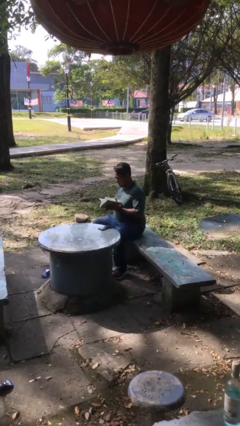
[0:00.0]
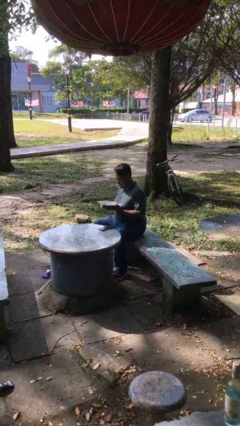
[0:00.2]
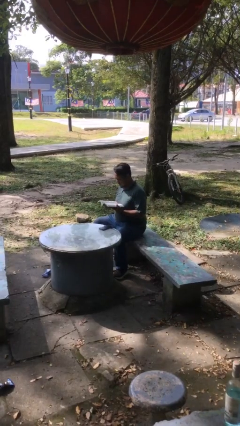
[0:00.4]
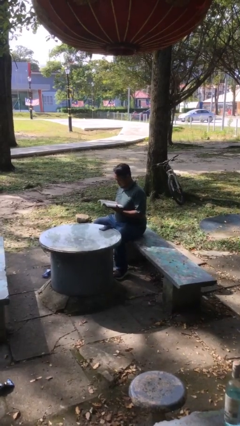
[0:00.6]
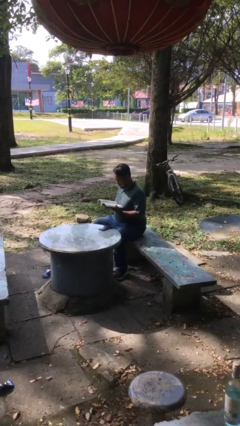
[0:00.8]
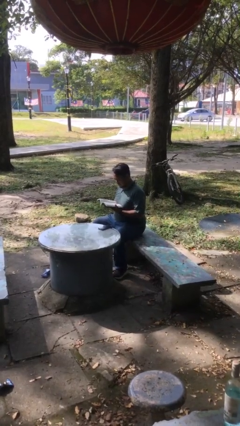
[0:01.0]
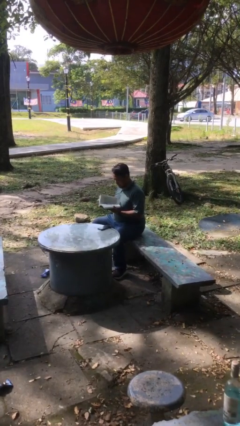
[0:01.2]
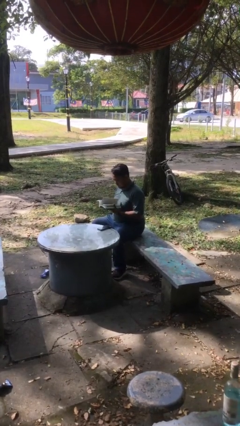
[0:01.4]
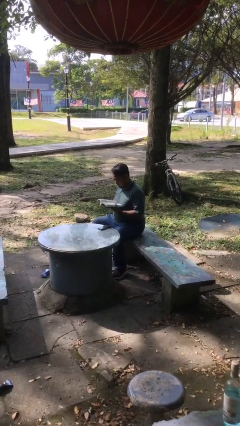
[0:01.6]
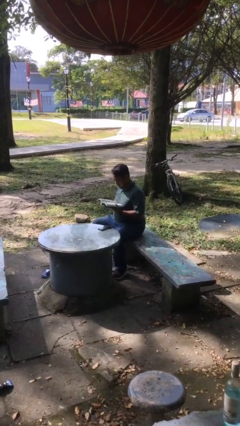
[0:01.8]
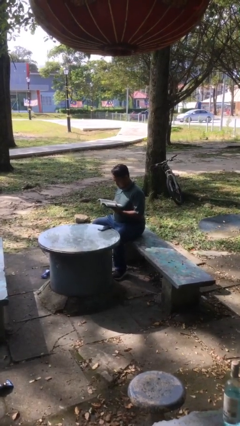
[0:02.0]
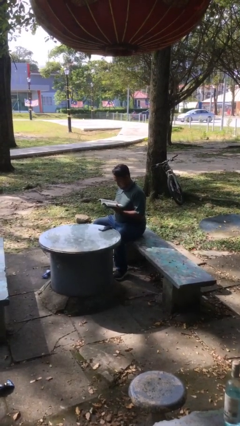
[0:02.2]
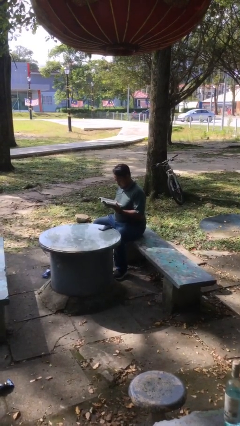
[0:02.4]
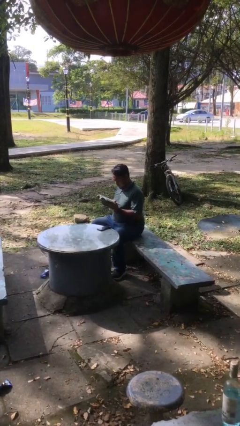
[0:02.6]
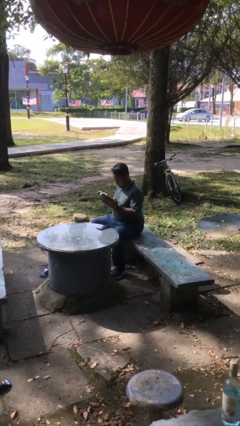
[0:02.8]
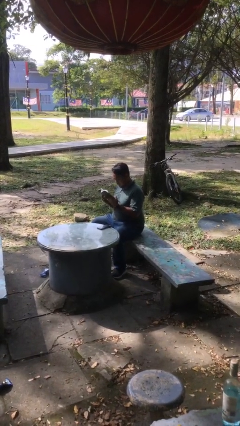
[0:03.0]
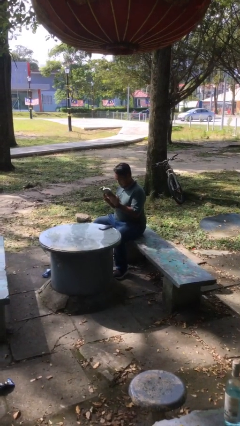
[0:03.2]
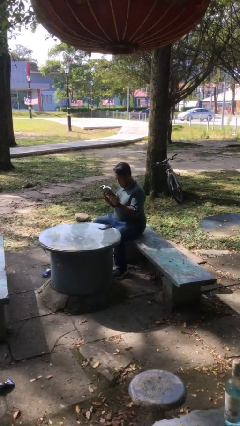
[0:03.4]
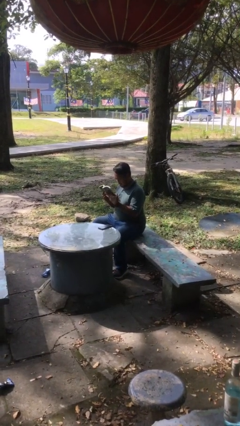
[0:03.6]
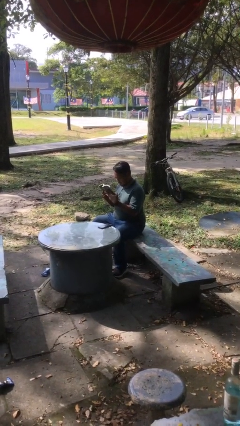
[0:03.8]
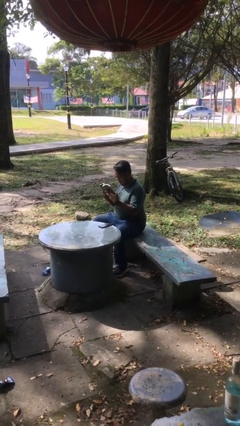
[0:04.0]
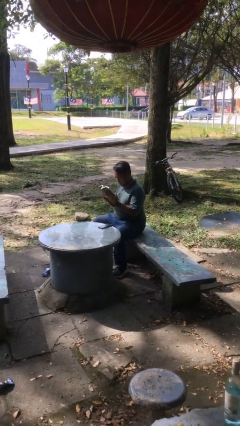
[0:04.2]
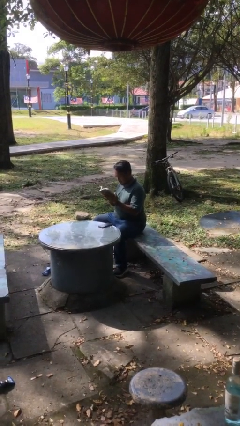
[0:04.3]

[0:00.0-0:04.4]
person reads document

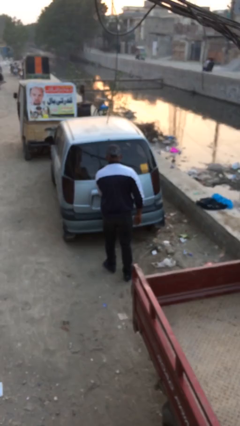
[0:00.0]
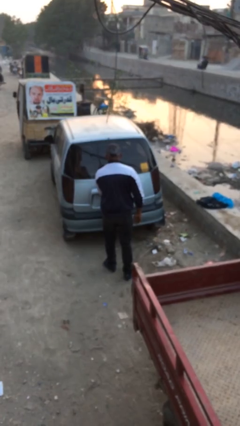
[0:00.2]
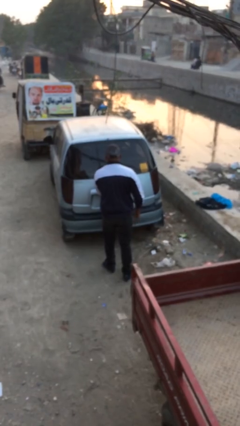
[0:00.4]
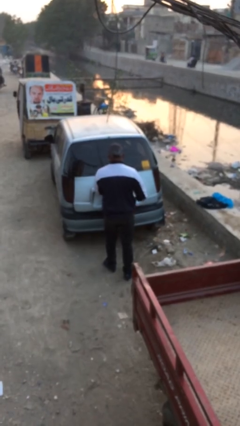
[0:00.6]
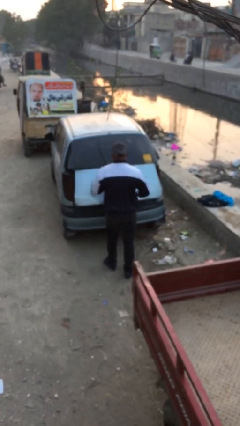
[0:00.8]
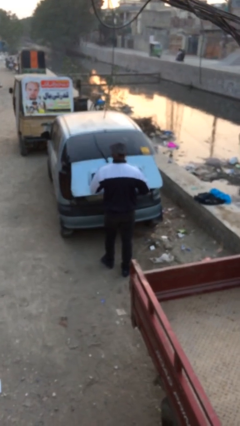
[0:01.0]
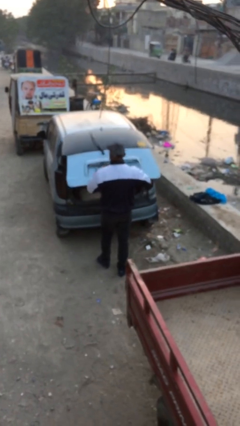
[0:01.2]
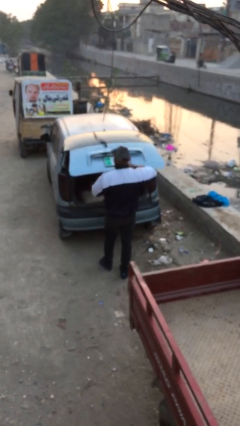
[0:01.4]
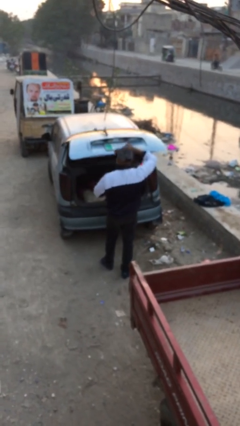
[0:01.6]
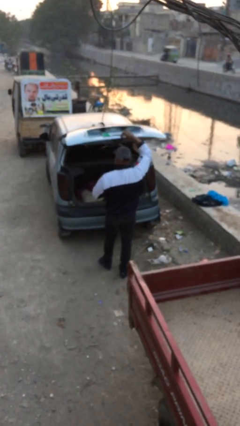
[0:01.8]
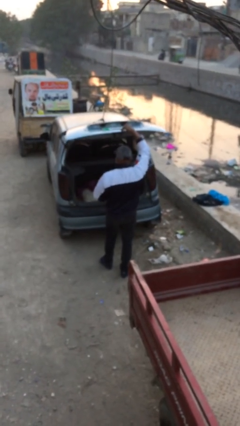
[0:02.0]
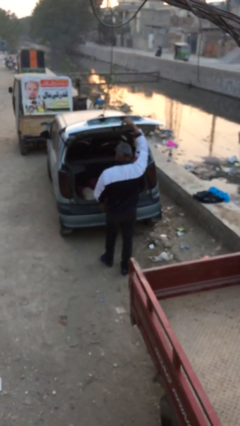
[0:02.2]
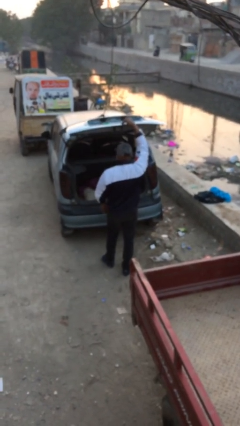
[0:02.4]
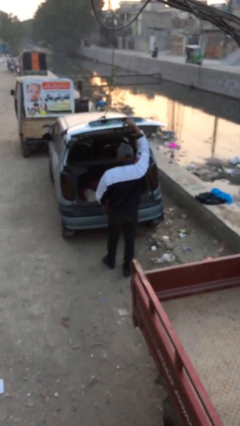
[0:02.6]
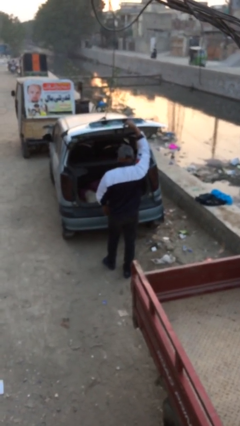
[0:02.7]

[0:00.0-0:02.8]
person opens car trunk

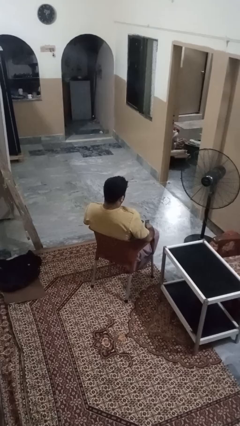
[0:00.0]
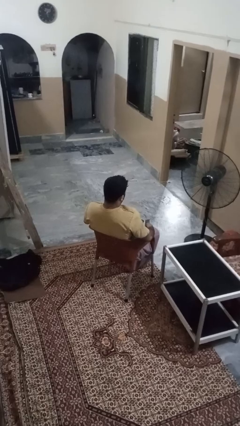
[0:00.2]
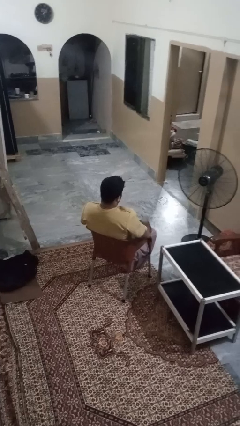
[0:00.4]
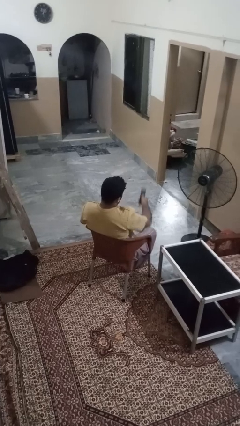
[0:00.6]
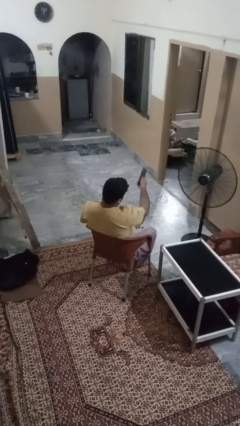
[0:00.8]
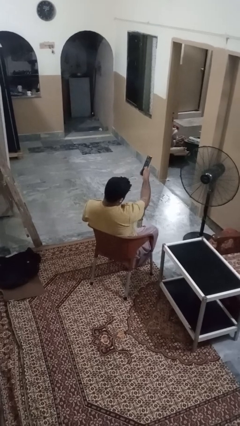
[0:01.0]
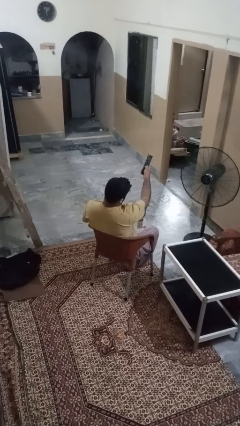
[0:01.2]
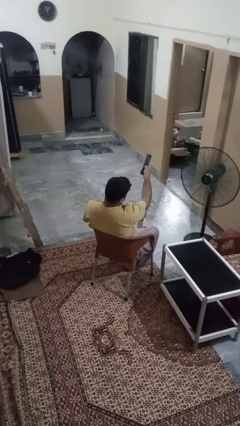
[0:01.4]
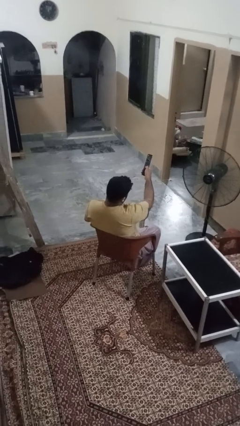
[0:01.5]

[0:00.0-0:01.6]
person uses television remote

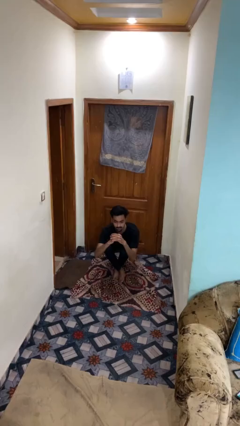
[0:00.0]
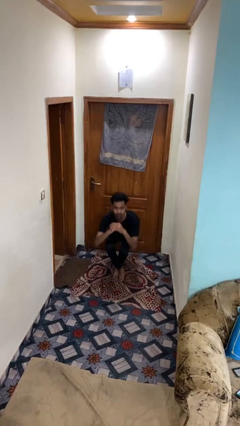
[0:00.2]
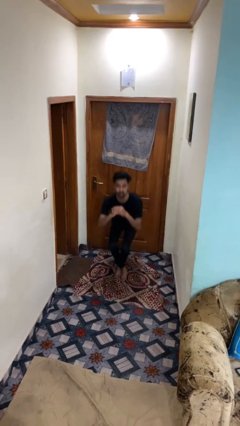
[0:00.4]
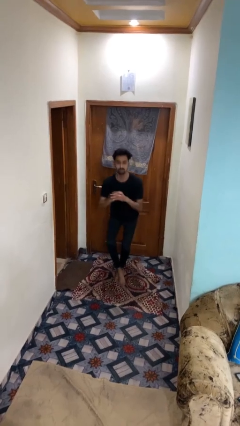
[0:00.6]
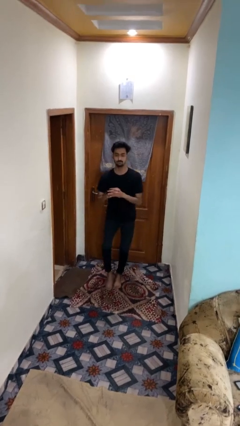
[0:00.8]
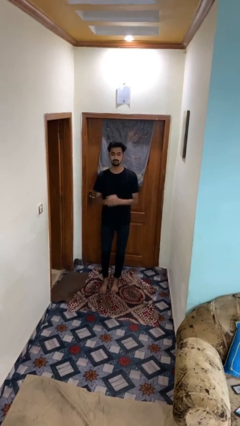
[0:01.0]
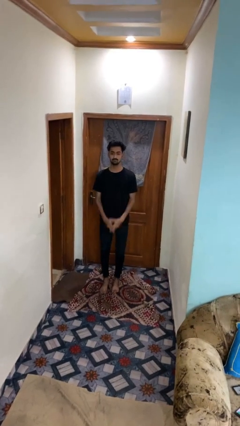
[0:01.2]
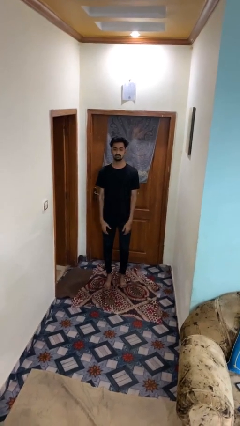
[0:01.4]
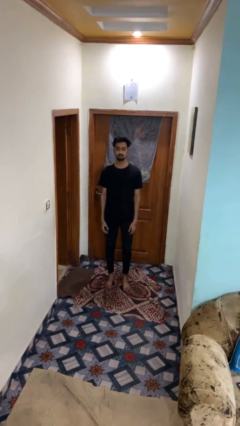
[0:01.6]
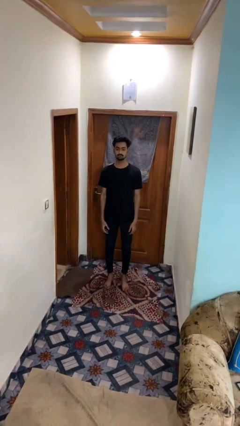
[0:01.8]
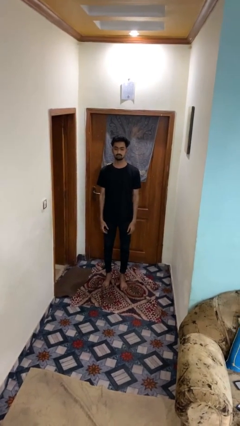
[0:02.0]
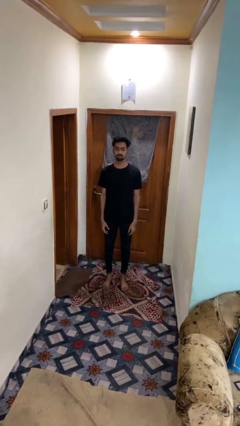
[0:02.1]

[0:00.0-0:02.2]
person stands up from floor

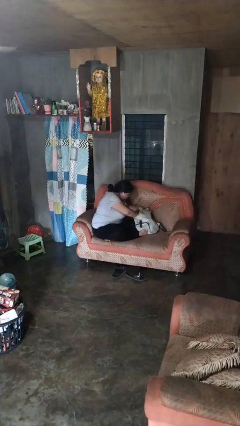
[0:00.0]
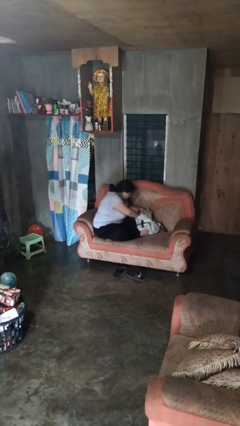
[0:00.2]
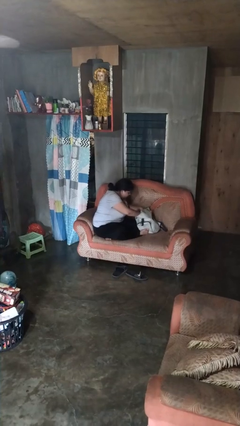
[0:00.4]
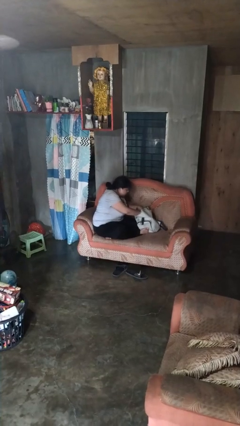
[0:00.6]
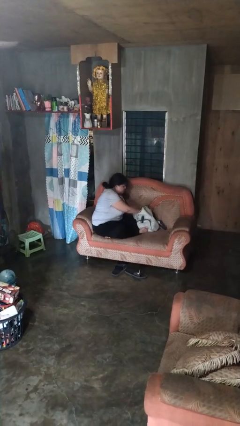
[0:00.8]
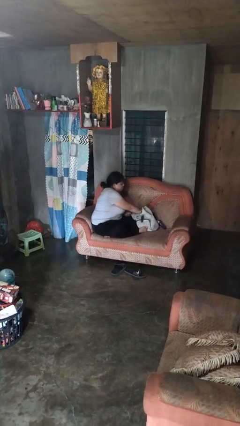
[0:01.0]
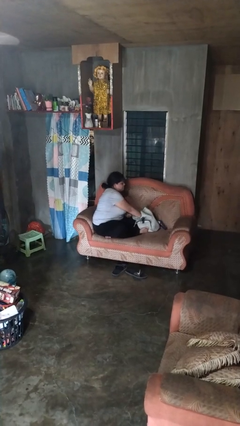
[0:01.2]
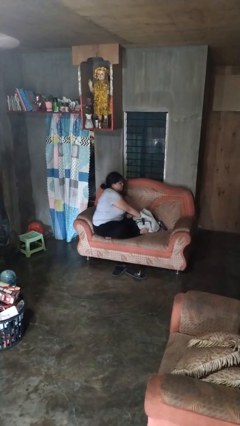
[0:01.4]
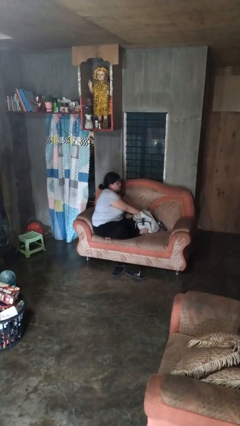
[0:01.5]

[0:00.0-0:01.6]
person takes object from backpack

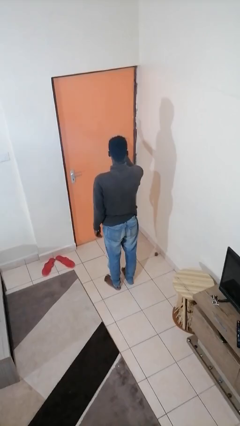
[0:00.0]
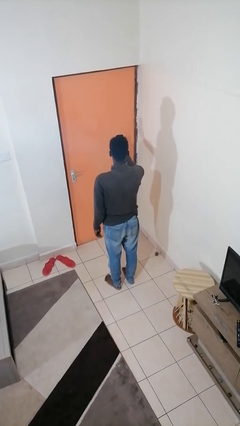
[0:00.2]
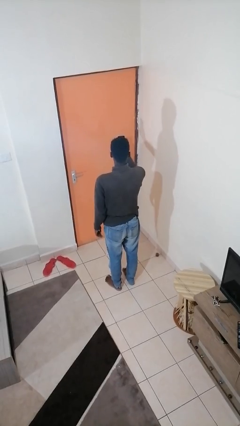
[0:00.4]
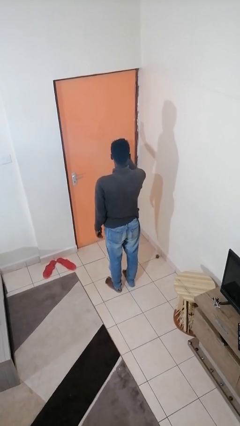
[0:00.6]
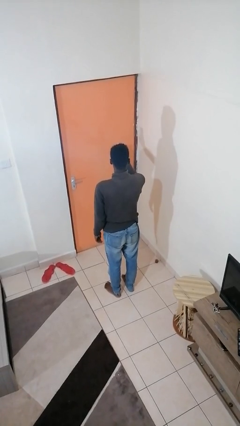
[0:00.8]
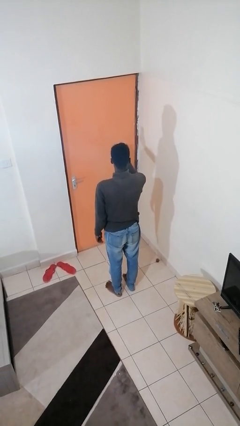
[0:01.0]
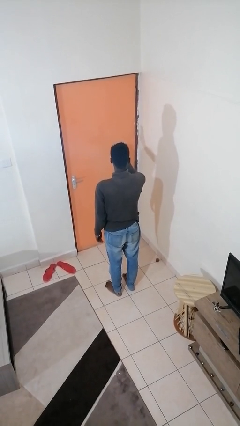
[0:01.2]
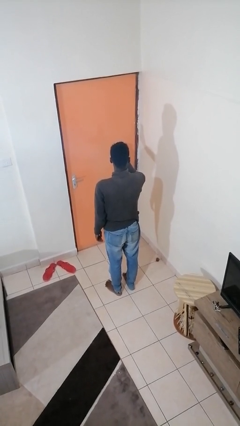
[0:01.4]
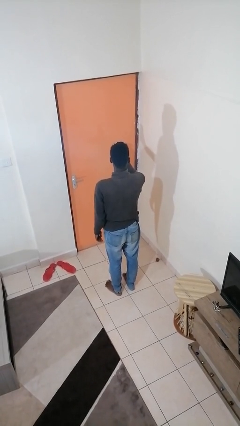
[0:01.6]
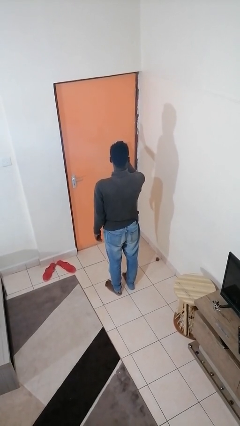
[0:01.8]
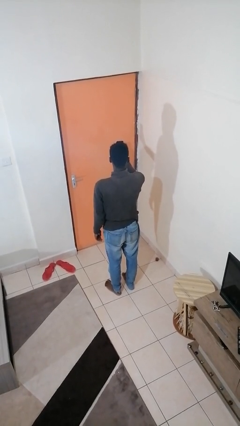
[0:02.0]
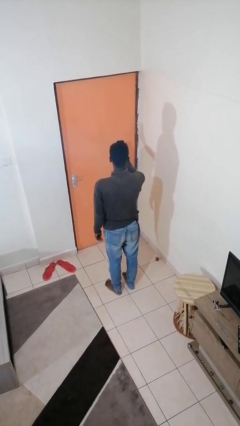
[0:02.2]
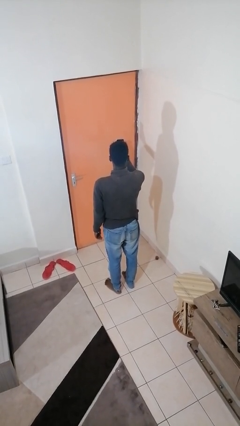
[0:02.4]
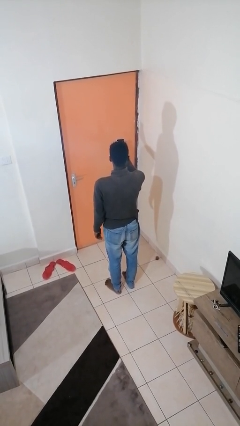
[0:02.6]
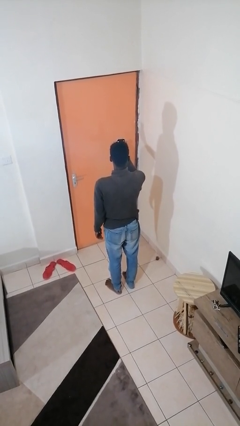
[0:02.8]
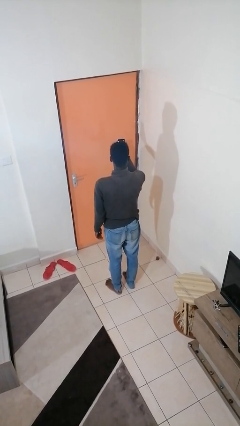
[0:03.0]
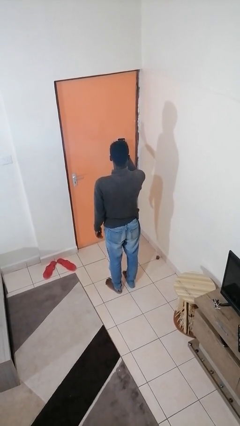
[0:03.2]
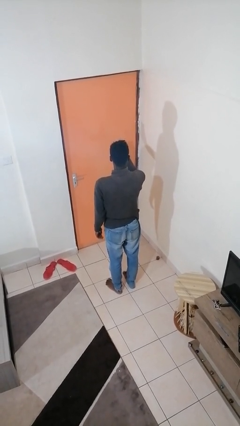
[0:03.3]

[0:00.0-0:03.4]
person takes selfie

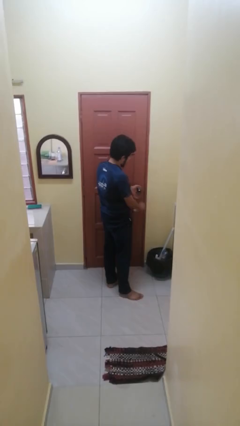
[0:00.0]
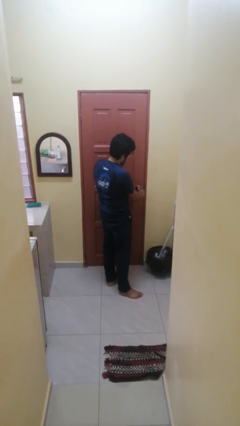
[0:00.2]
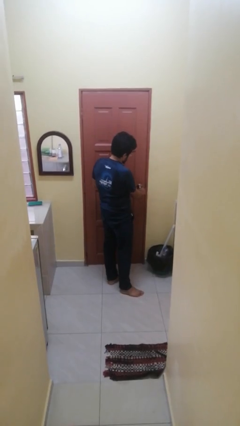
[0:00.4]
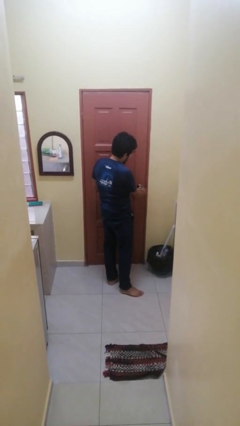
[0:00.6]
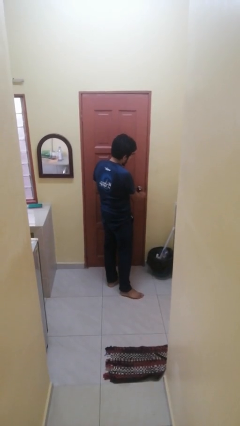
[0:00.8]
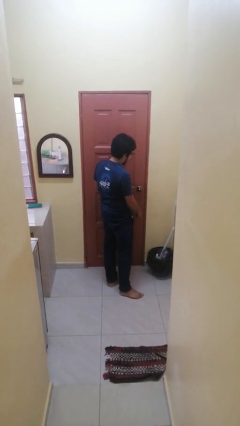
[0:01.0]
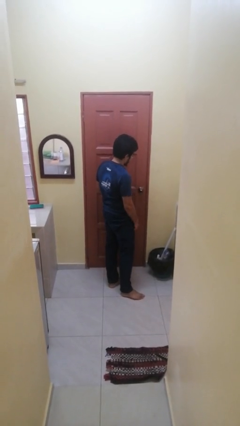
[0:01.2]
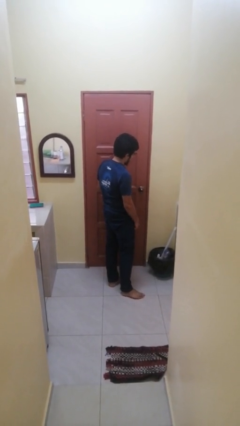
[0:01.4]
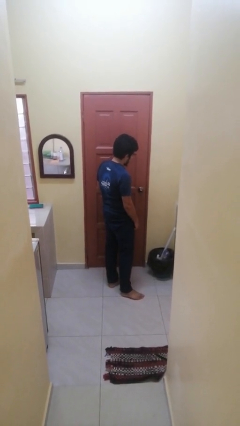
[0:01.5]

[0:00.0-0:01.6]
person locks door with keys
